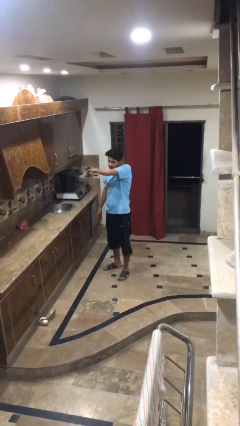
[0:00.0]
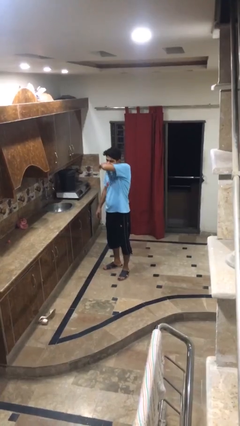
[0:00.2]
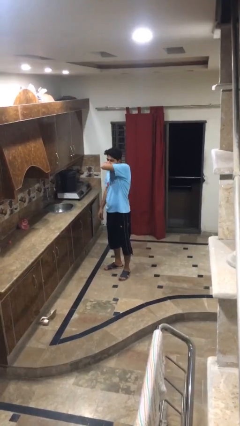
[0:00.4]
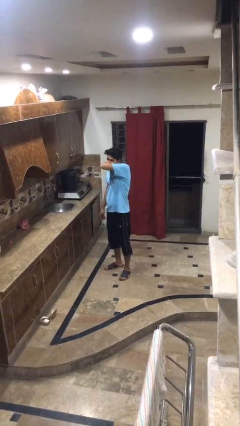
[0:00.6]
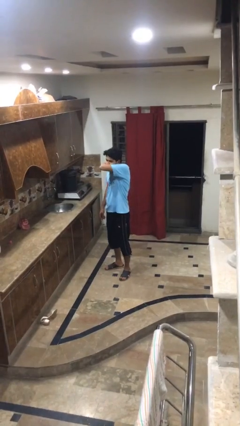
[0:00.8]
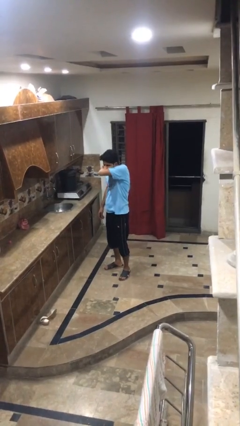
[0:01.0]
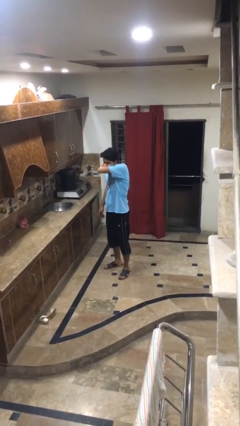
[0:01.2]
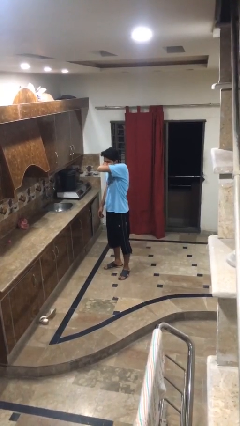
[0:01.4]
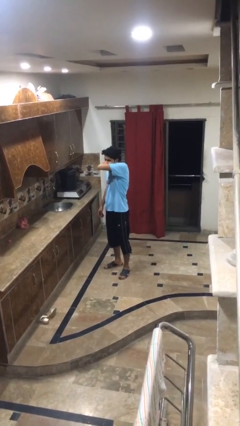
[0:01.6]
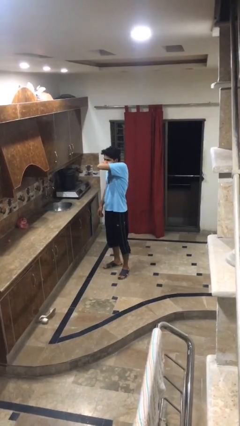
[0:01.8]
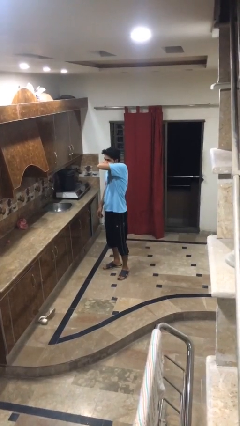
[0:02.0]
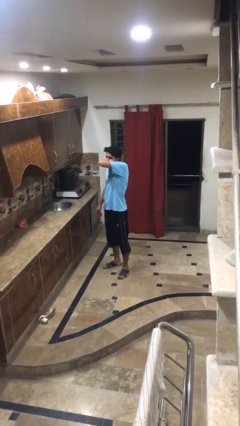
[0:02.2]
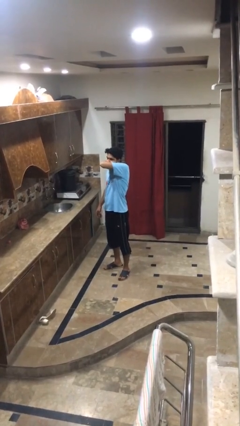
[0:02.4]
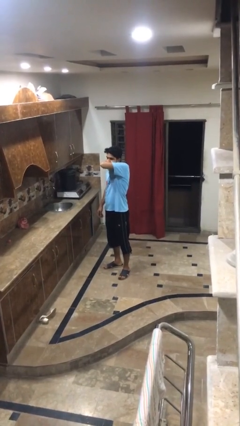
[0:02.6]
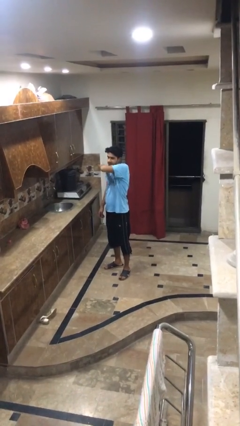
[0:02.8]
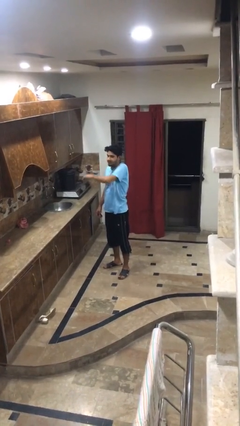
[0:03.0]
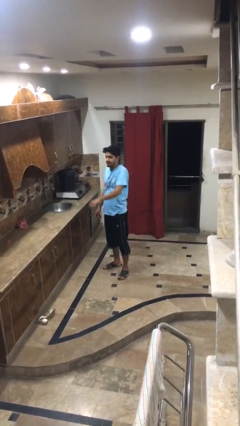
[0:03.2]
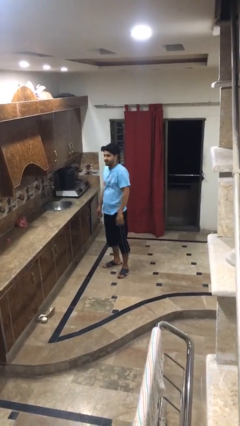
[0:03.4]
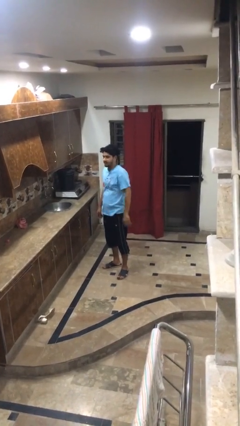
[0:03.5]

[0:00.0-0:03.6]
person sneezes into arm

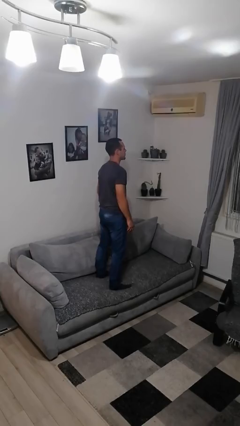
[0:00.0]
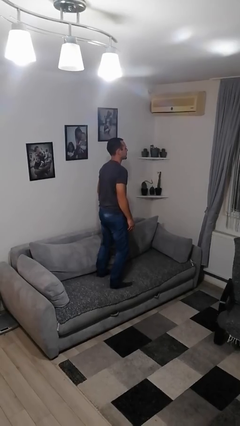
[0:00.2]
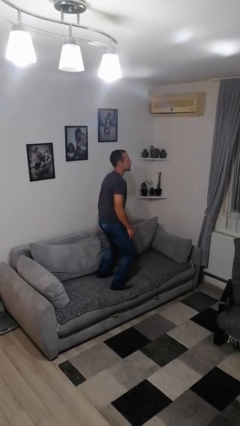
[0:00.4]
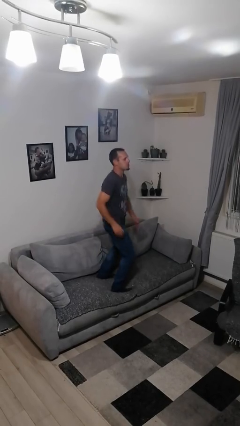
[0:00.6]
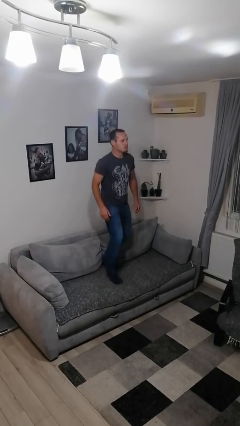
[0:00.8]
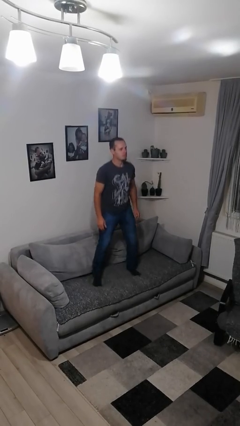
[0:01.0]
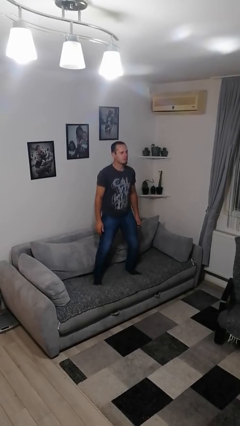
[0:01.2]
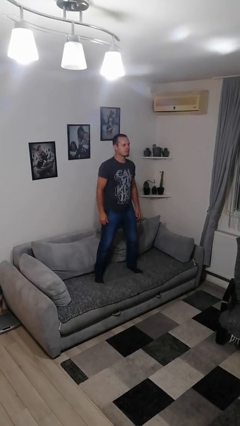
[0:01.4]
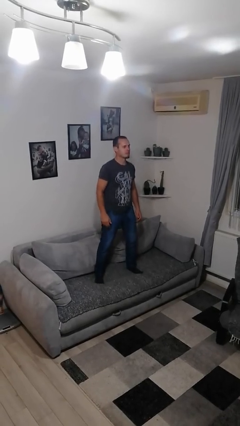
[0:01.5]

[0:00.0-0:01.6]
person jumps on couch

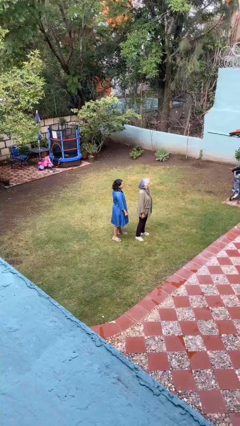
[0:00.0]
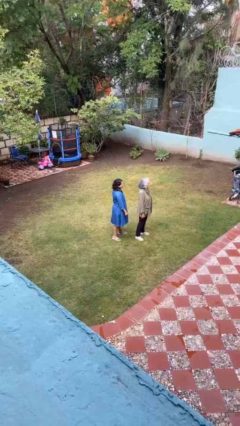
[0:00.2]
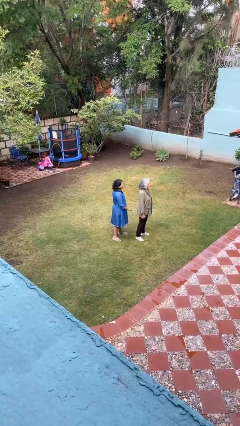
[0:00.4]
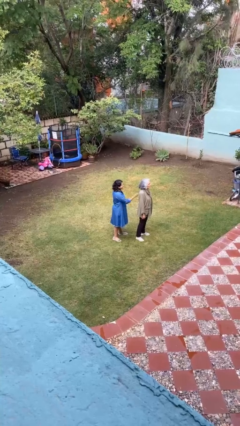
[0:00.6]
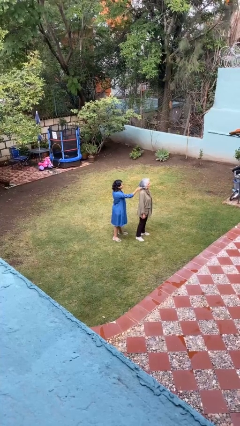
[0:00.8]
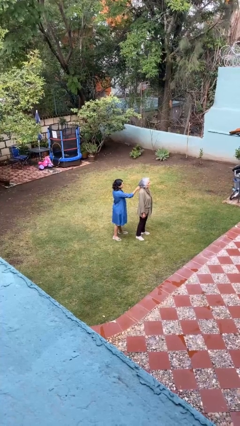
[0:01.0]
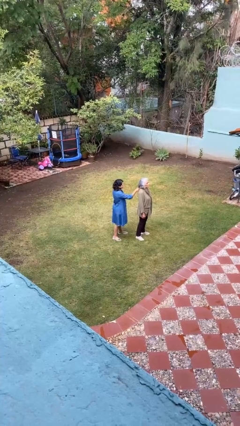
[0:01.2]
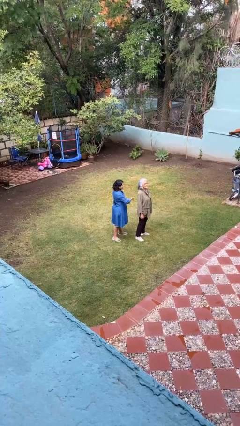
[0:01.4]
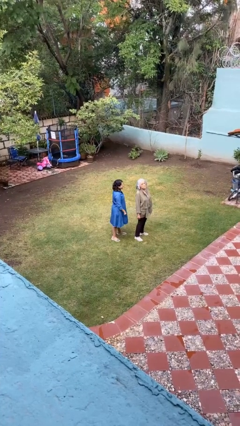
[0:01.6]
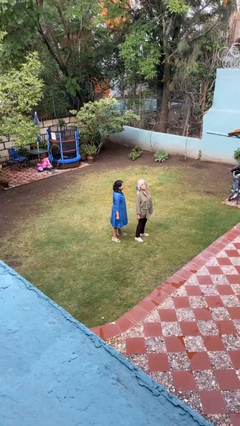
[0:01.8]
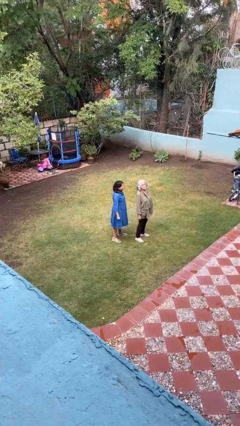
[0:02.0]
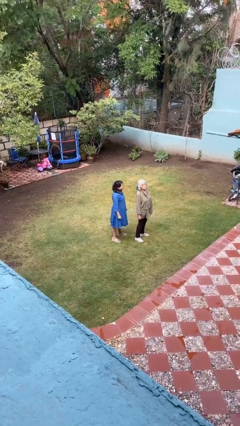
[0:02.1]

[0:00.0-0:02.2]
person grabs person by hair

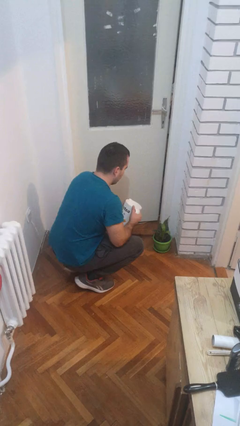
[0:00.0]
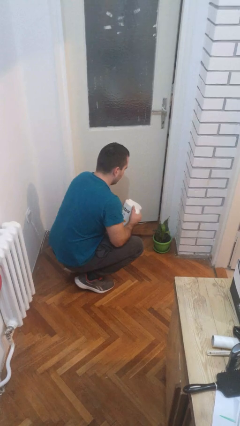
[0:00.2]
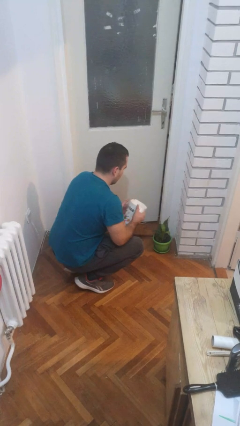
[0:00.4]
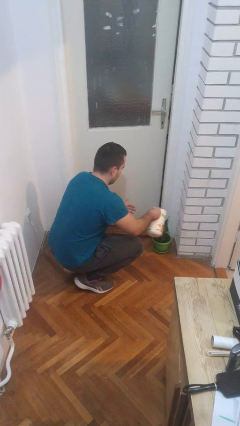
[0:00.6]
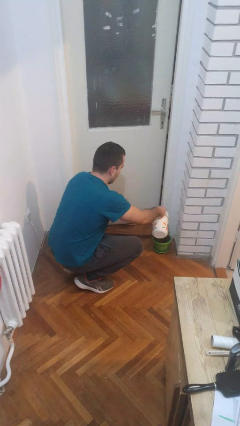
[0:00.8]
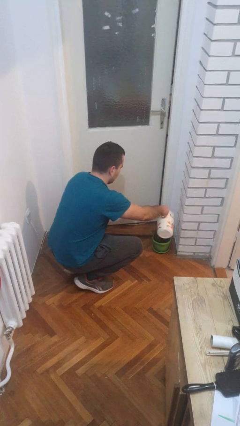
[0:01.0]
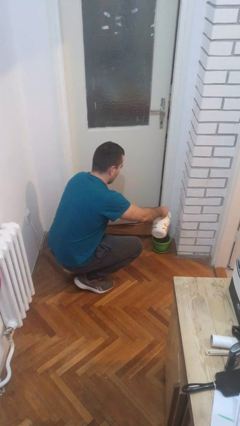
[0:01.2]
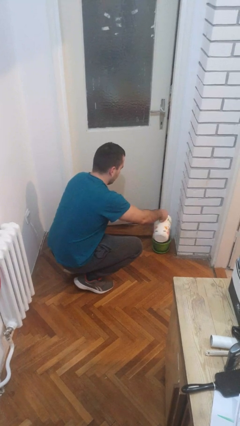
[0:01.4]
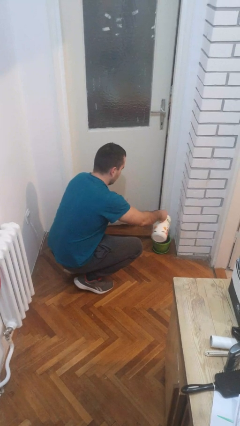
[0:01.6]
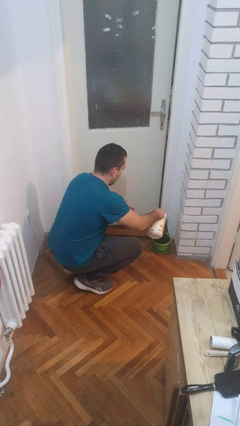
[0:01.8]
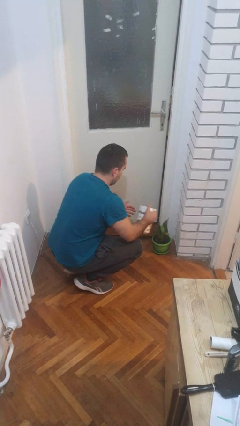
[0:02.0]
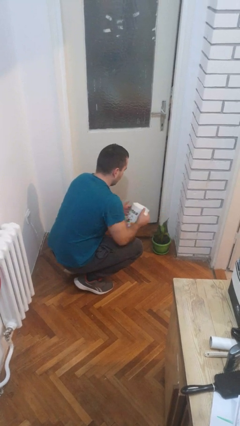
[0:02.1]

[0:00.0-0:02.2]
person waters houseplant

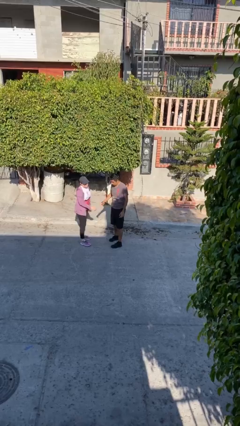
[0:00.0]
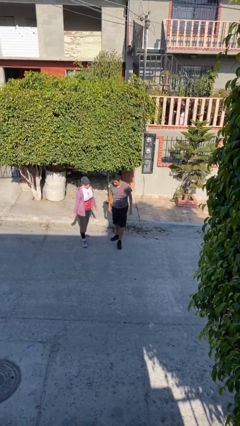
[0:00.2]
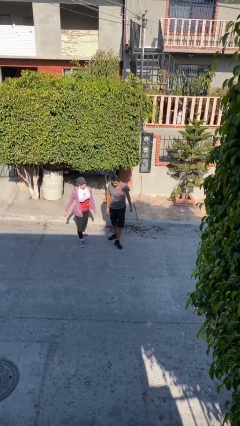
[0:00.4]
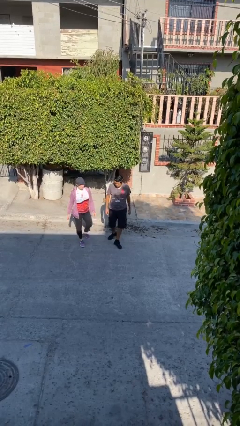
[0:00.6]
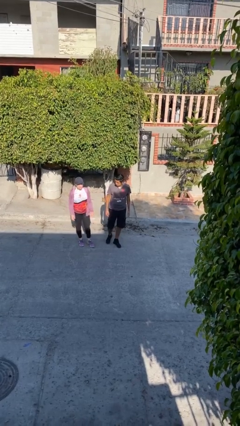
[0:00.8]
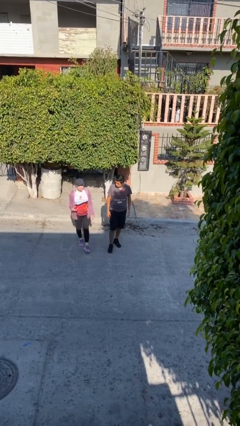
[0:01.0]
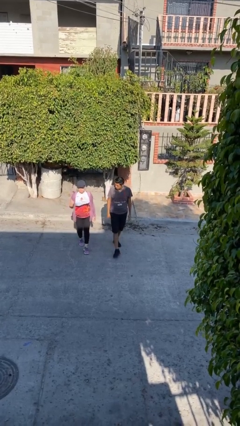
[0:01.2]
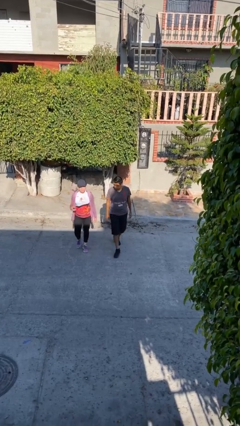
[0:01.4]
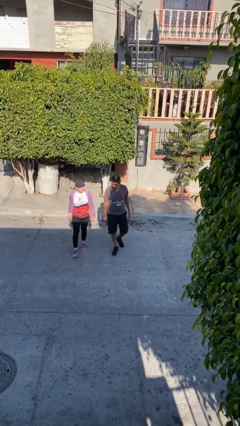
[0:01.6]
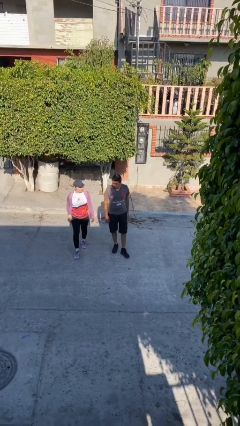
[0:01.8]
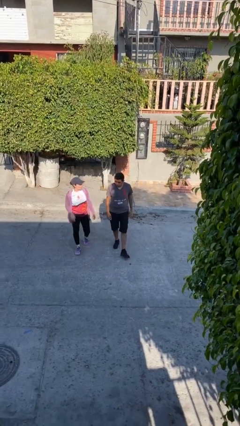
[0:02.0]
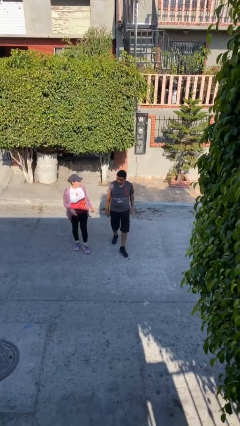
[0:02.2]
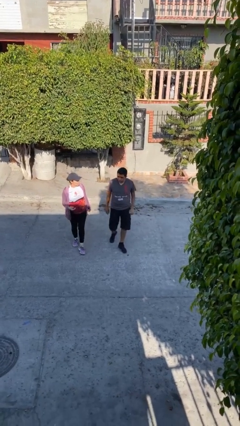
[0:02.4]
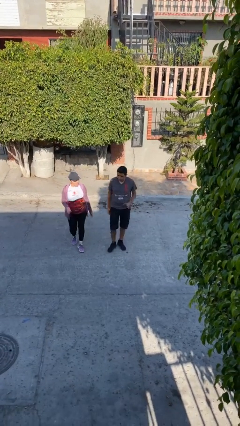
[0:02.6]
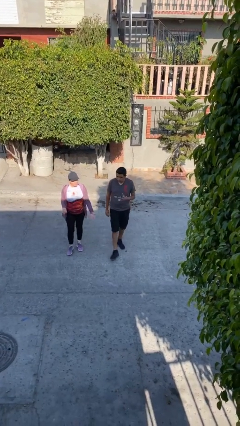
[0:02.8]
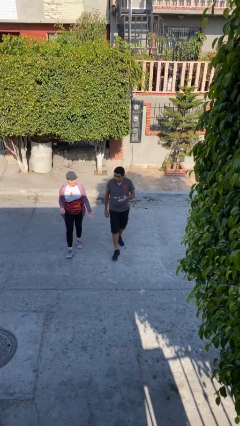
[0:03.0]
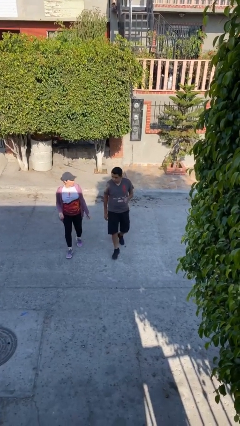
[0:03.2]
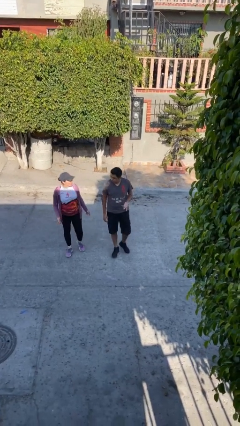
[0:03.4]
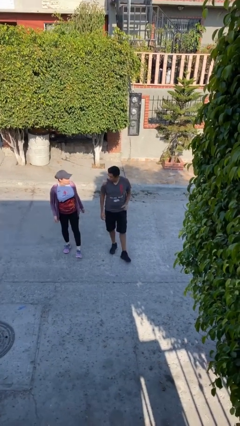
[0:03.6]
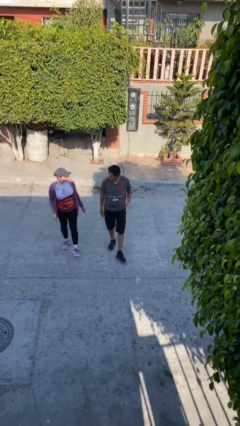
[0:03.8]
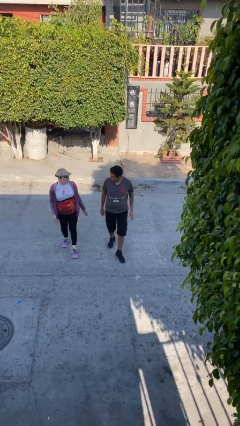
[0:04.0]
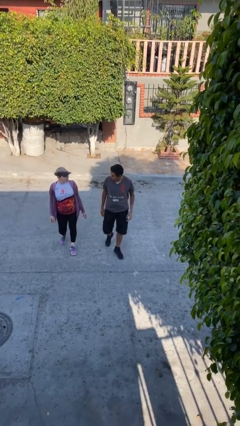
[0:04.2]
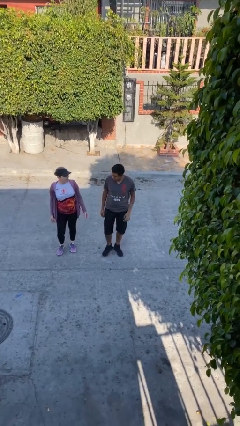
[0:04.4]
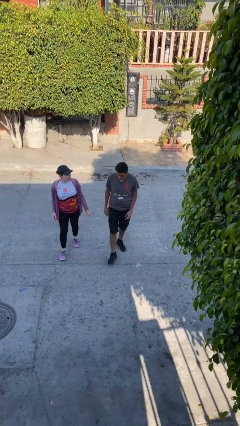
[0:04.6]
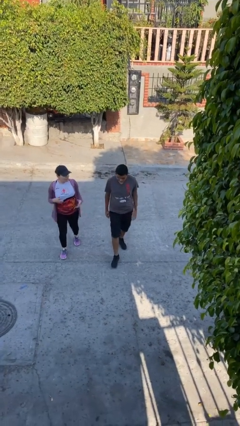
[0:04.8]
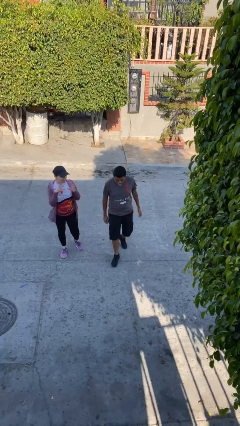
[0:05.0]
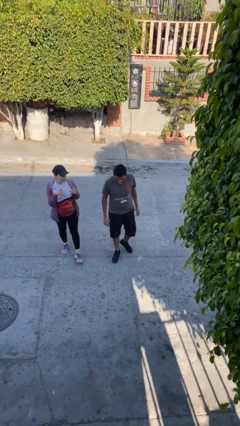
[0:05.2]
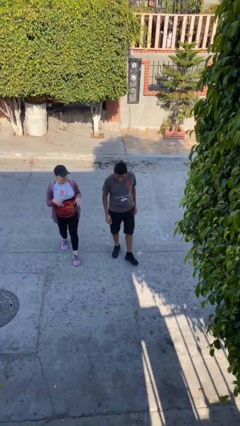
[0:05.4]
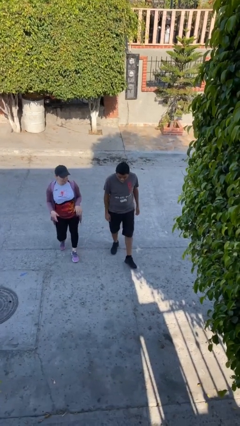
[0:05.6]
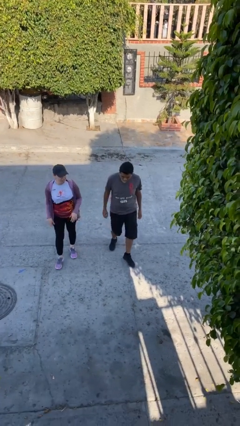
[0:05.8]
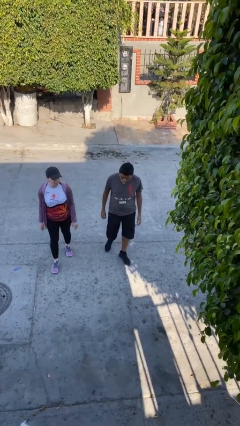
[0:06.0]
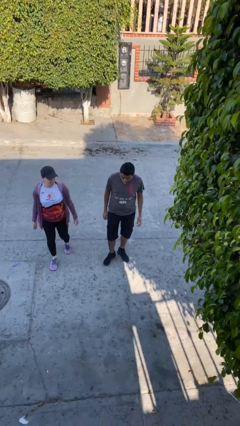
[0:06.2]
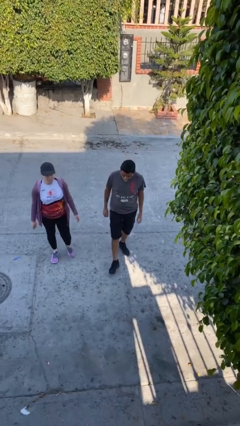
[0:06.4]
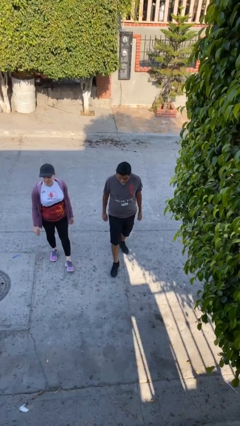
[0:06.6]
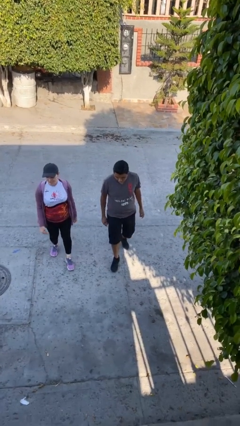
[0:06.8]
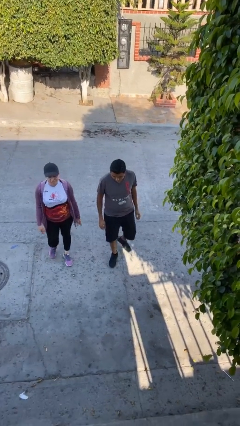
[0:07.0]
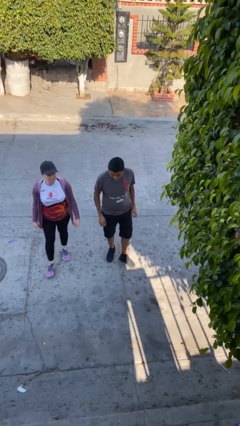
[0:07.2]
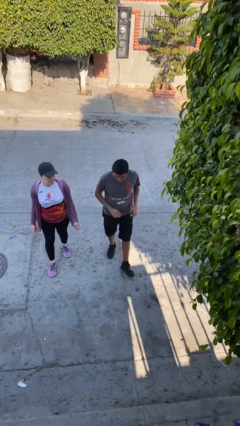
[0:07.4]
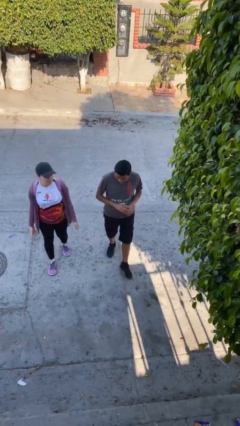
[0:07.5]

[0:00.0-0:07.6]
person talks to person

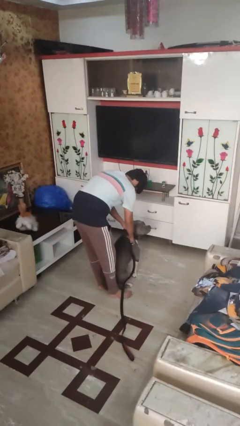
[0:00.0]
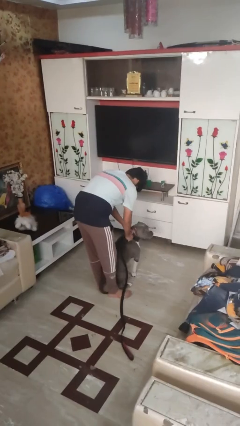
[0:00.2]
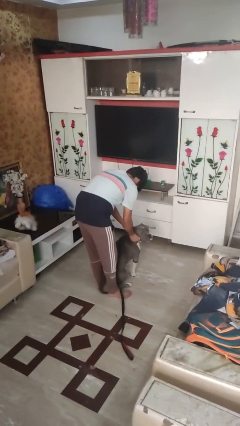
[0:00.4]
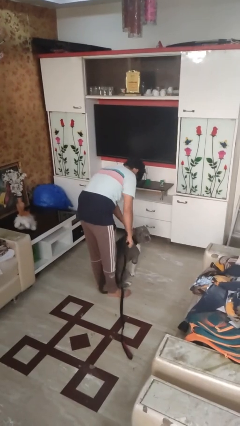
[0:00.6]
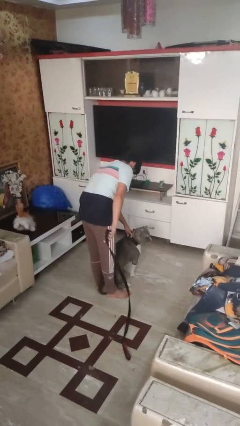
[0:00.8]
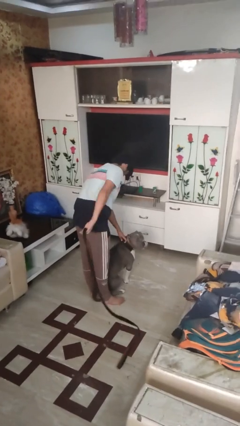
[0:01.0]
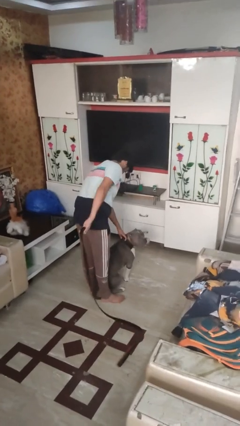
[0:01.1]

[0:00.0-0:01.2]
person unattaches leash from dog
